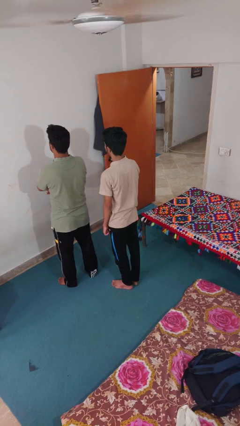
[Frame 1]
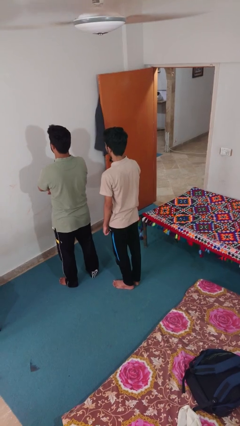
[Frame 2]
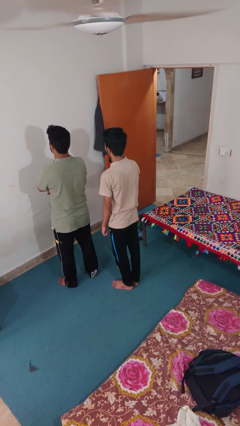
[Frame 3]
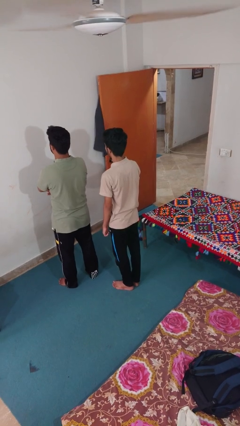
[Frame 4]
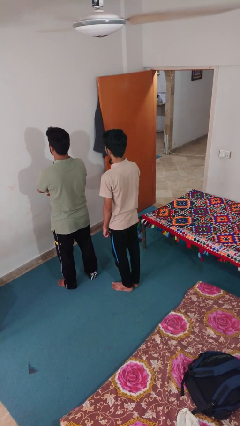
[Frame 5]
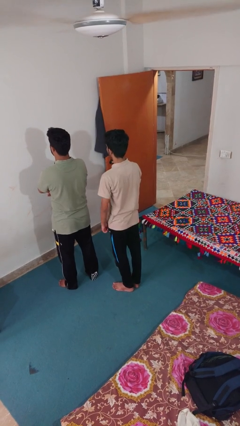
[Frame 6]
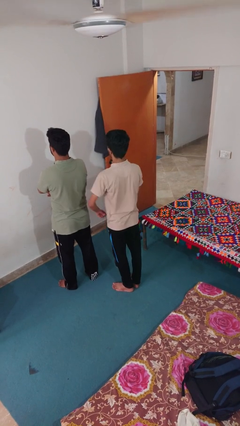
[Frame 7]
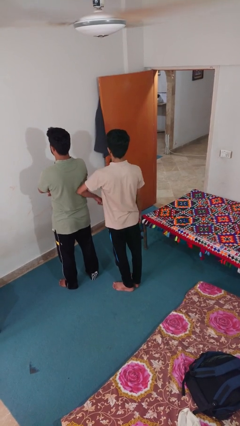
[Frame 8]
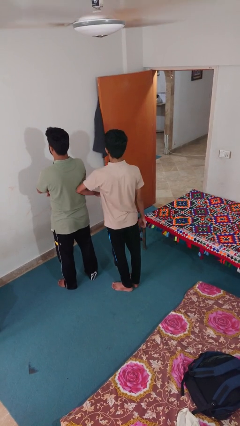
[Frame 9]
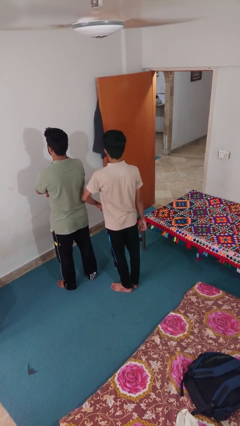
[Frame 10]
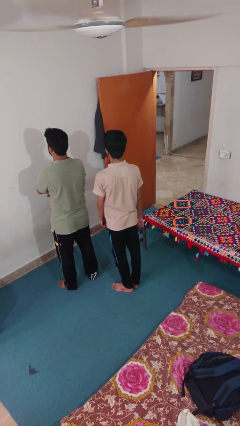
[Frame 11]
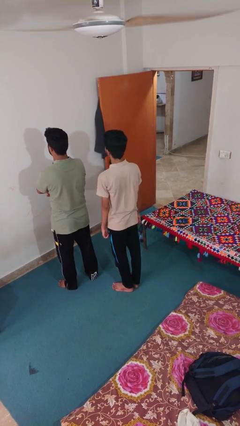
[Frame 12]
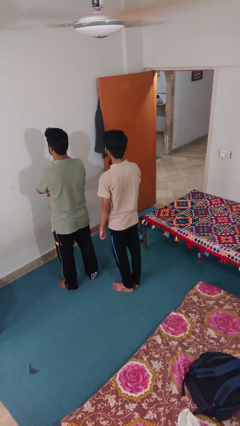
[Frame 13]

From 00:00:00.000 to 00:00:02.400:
person nudges person with elbow

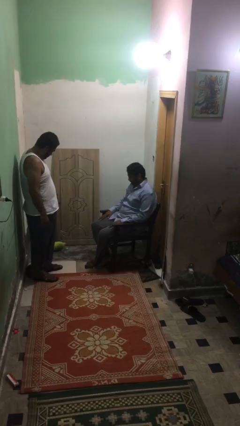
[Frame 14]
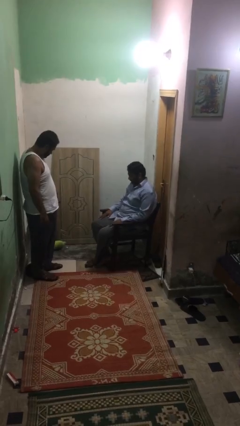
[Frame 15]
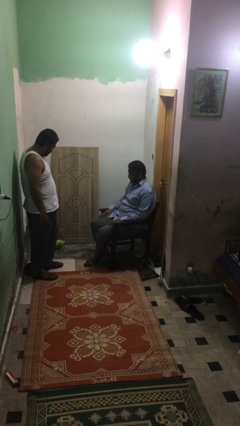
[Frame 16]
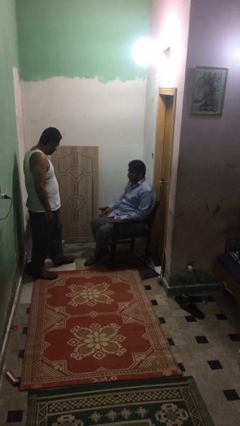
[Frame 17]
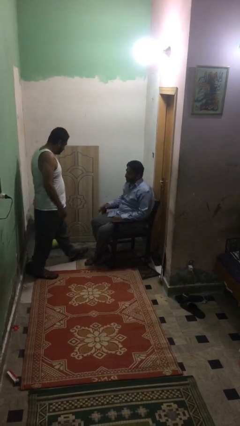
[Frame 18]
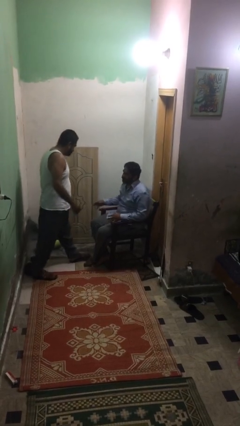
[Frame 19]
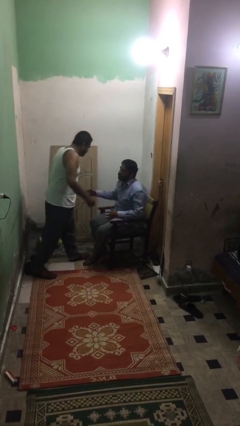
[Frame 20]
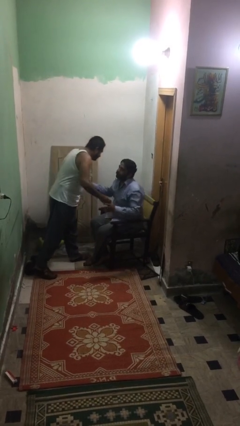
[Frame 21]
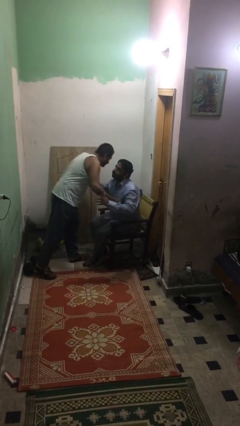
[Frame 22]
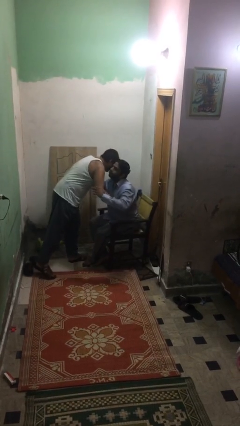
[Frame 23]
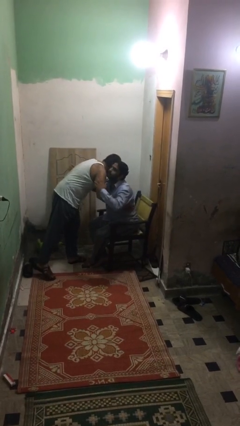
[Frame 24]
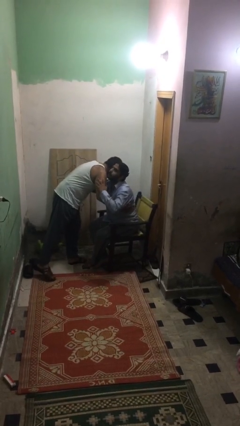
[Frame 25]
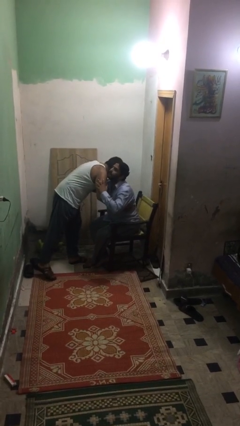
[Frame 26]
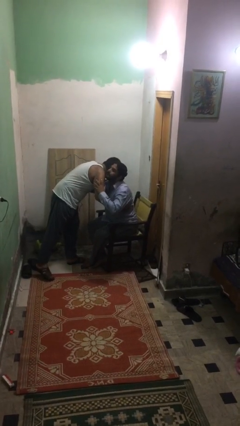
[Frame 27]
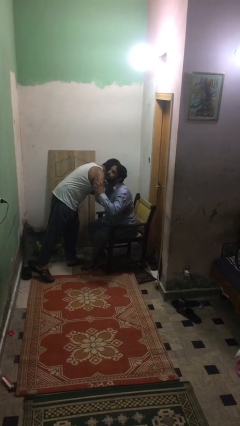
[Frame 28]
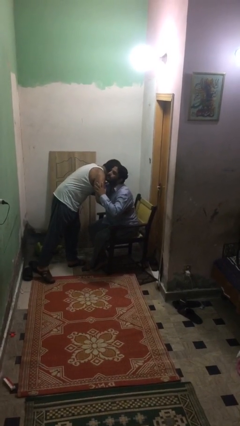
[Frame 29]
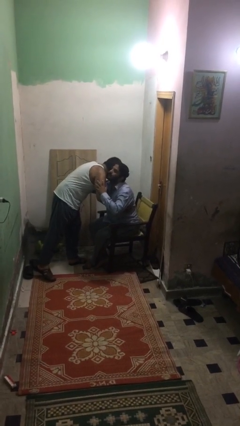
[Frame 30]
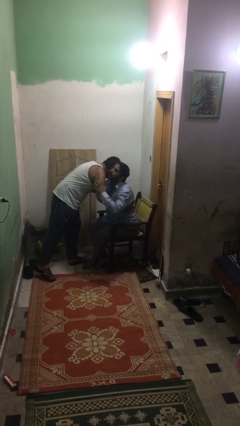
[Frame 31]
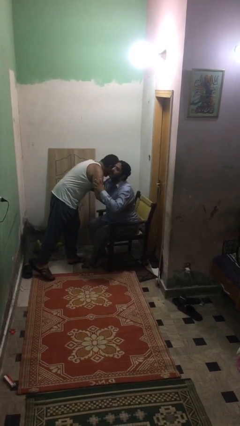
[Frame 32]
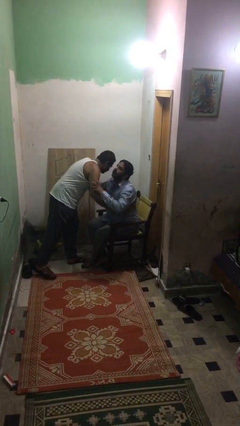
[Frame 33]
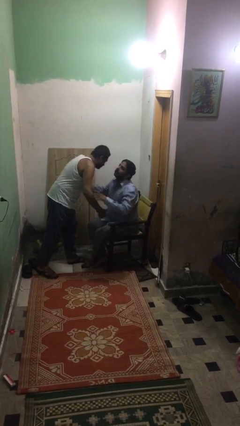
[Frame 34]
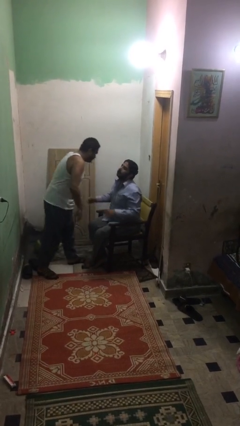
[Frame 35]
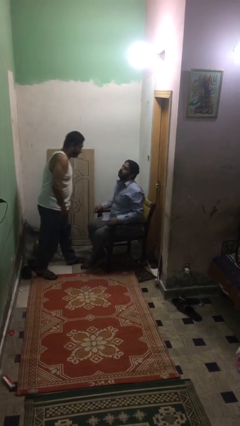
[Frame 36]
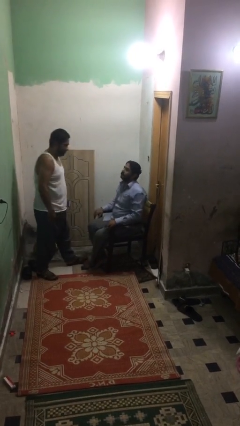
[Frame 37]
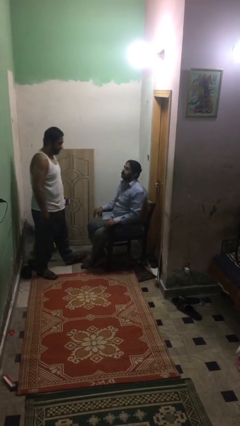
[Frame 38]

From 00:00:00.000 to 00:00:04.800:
person embraces person

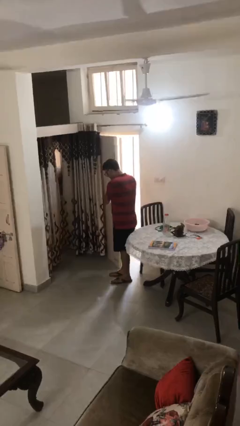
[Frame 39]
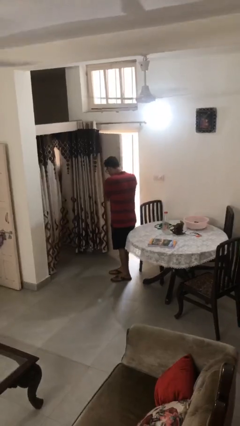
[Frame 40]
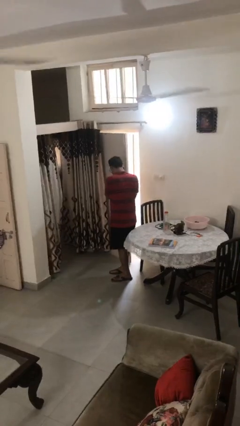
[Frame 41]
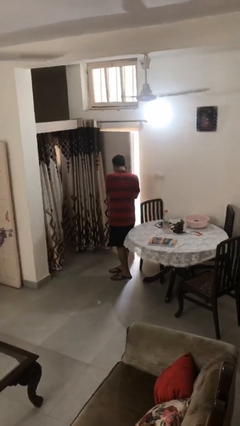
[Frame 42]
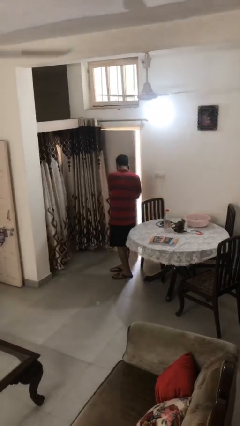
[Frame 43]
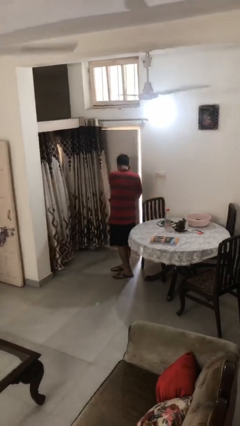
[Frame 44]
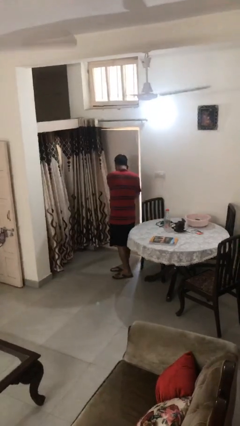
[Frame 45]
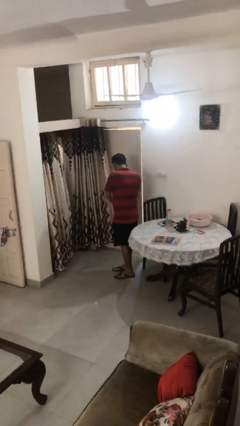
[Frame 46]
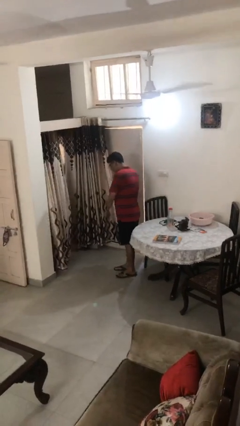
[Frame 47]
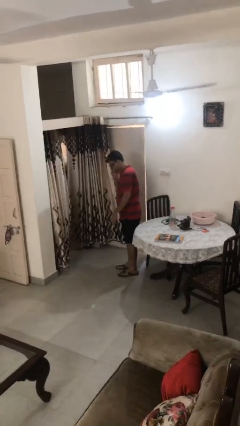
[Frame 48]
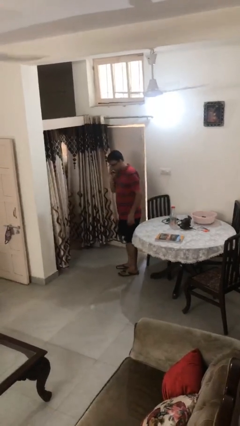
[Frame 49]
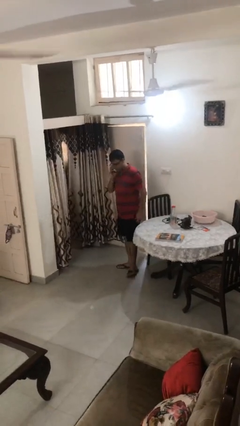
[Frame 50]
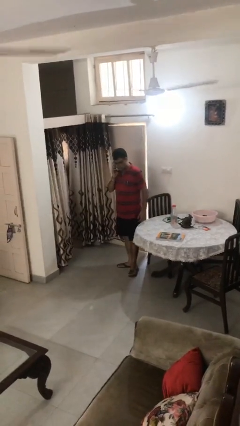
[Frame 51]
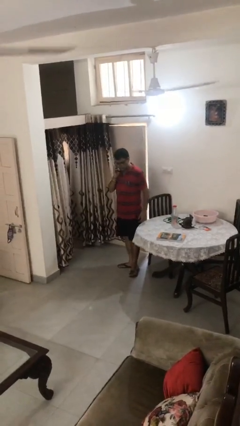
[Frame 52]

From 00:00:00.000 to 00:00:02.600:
person closes facility door

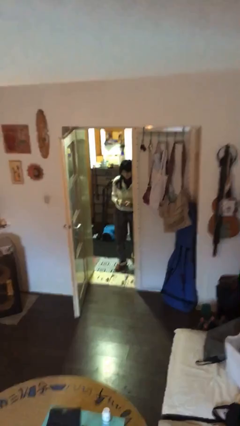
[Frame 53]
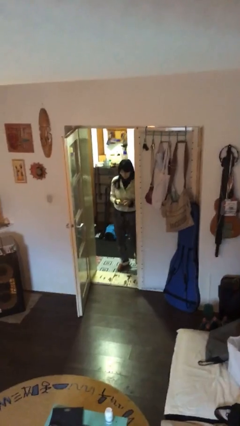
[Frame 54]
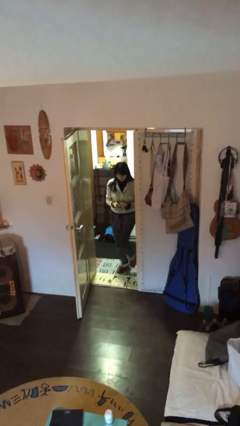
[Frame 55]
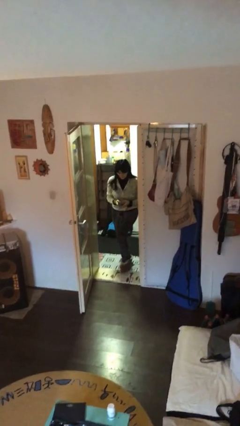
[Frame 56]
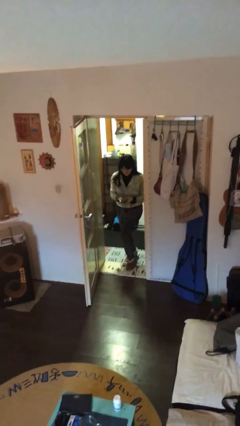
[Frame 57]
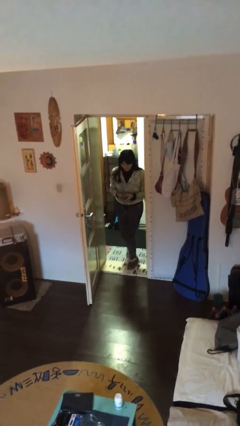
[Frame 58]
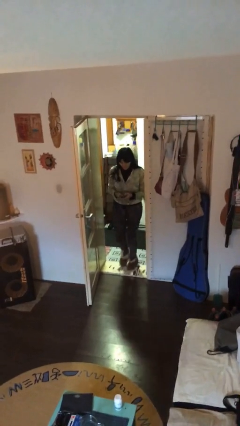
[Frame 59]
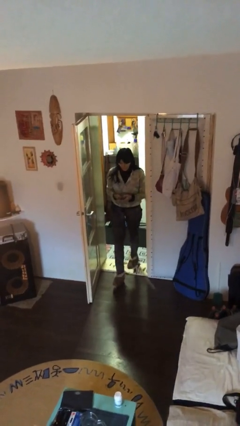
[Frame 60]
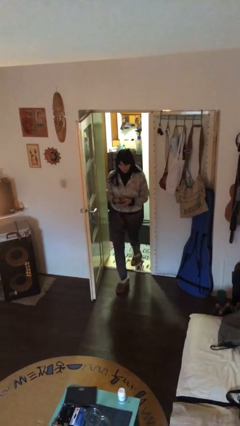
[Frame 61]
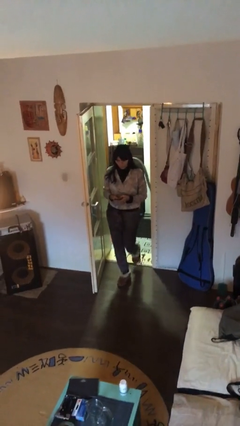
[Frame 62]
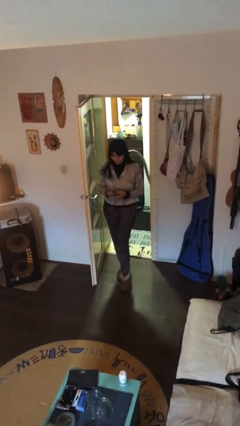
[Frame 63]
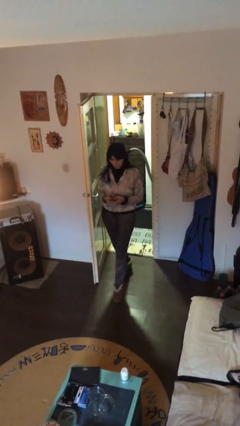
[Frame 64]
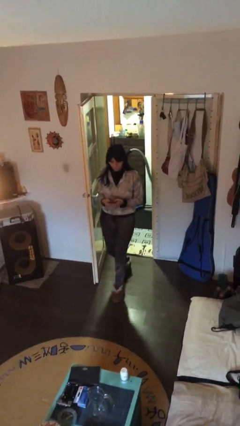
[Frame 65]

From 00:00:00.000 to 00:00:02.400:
person enters scene through structure

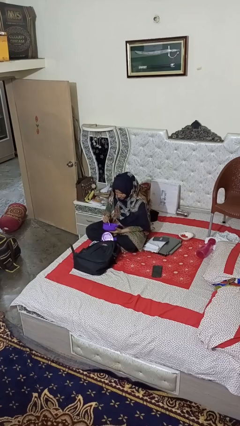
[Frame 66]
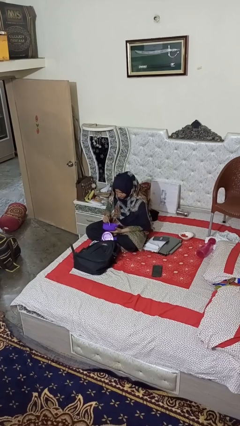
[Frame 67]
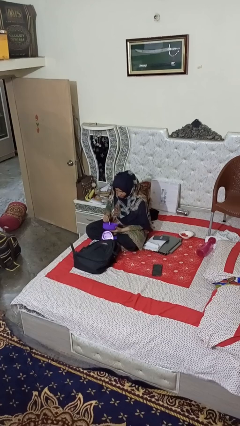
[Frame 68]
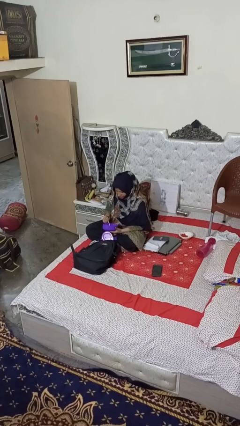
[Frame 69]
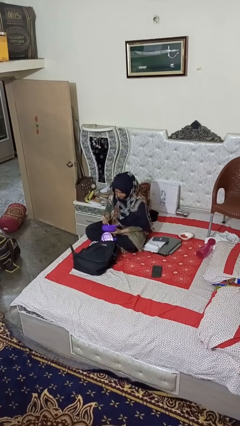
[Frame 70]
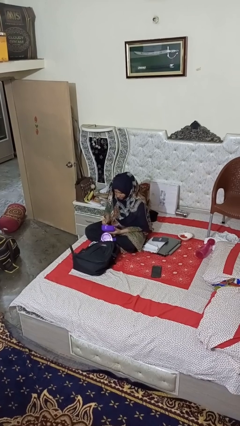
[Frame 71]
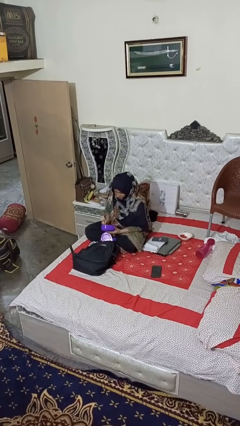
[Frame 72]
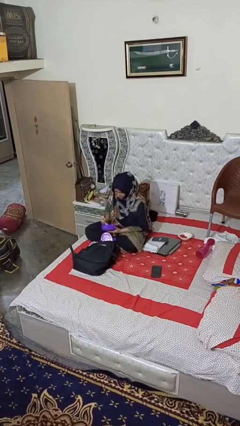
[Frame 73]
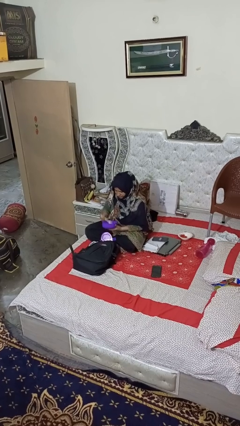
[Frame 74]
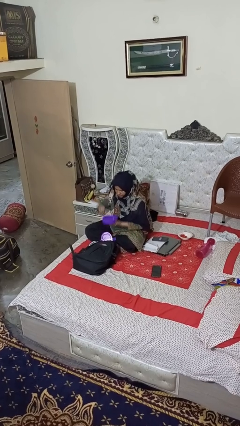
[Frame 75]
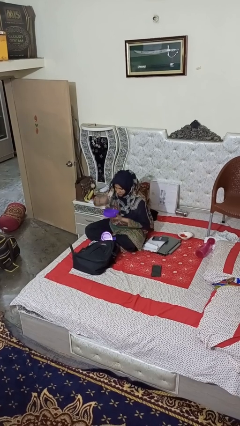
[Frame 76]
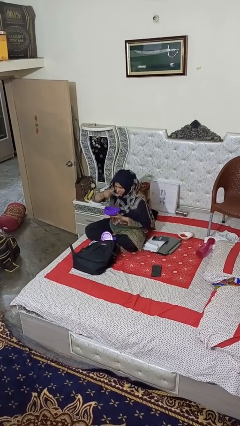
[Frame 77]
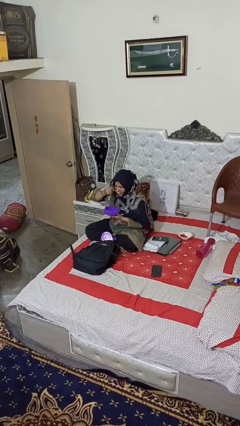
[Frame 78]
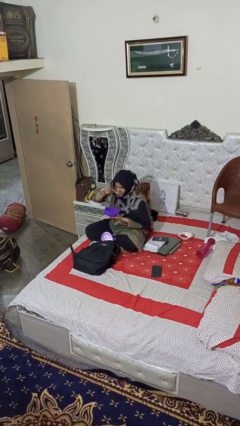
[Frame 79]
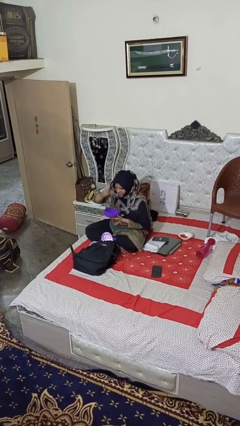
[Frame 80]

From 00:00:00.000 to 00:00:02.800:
person eats snack from bag

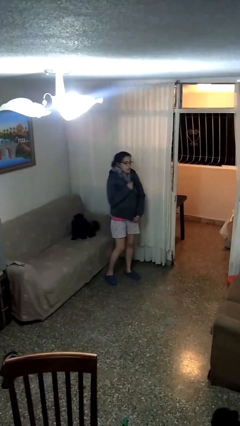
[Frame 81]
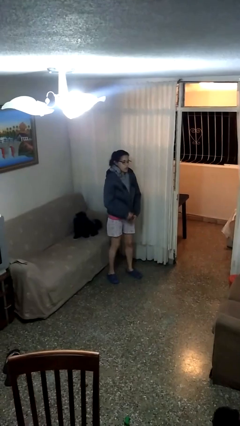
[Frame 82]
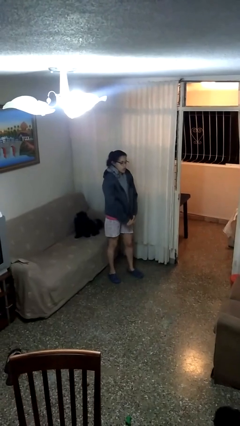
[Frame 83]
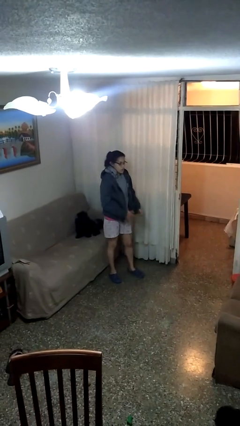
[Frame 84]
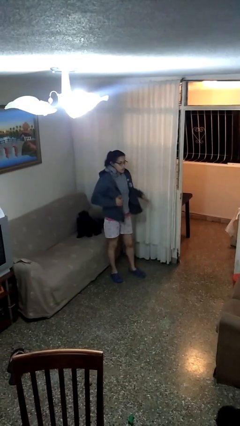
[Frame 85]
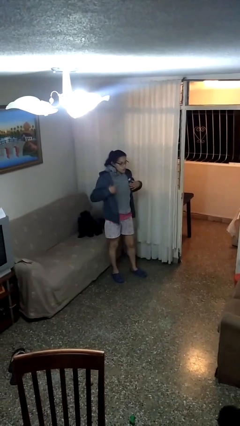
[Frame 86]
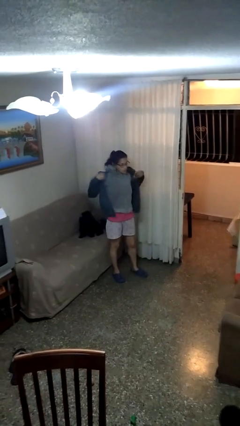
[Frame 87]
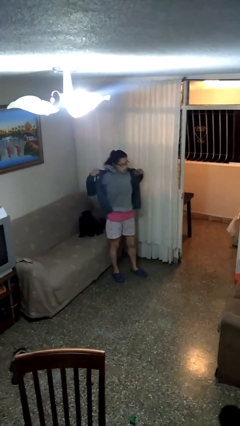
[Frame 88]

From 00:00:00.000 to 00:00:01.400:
person unzips jacket

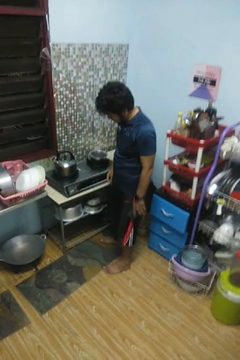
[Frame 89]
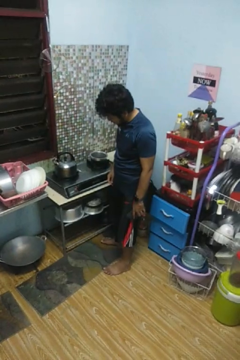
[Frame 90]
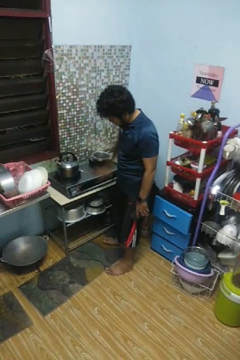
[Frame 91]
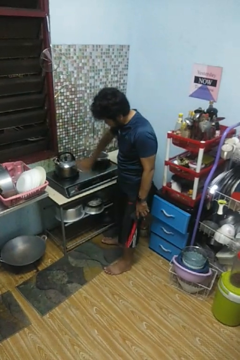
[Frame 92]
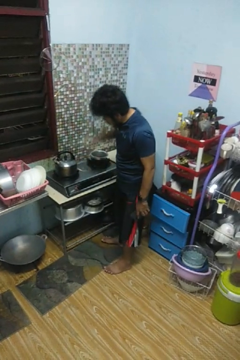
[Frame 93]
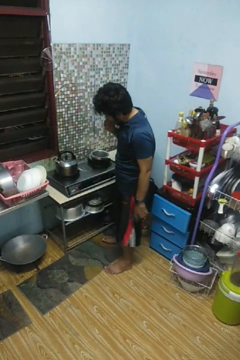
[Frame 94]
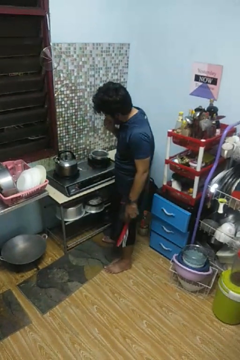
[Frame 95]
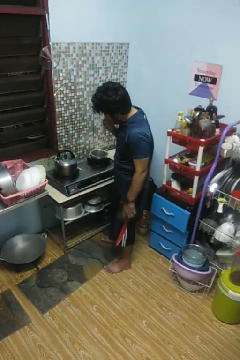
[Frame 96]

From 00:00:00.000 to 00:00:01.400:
person burns hand
